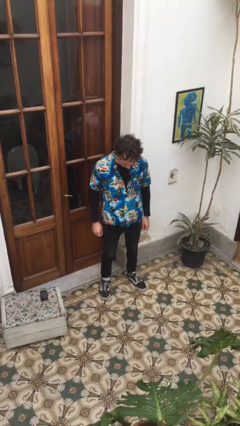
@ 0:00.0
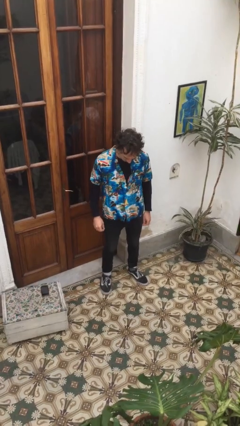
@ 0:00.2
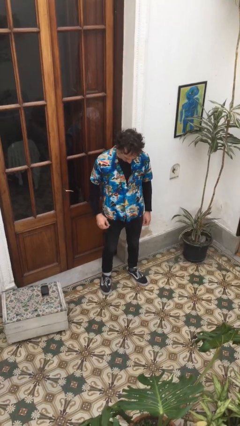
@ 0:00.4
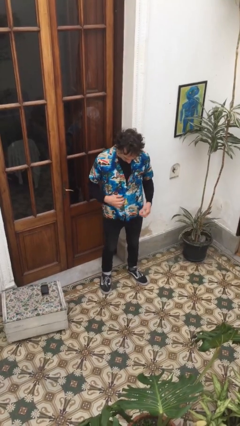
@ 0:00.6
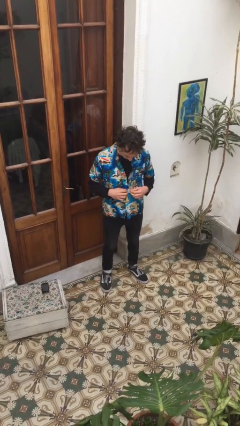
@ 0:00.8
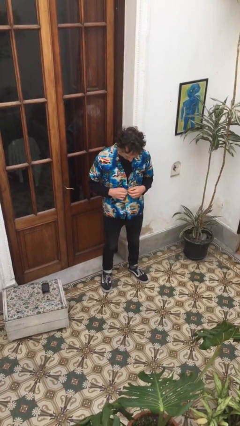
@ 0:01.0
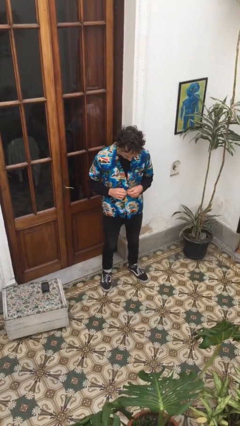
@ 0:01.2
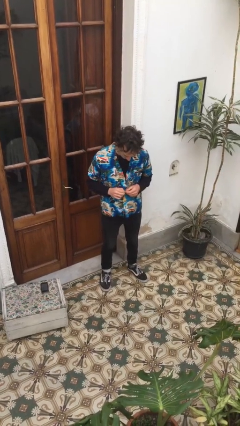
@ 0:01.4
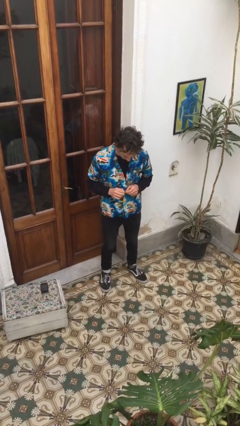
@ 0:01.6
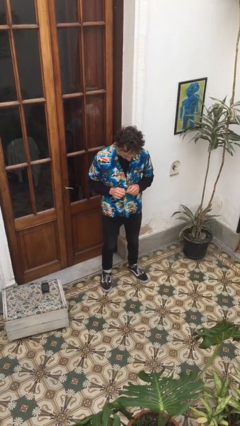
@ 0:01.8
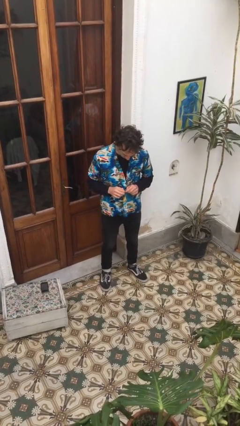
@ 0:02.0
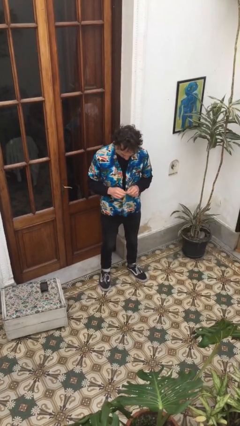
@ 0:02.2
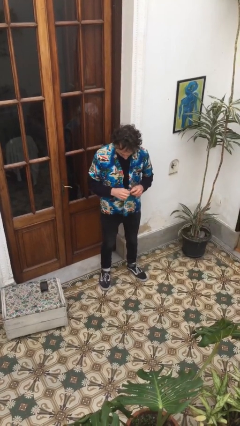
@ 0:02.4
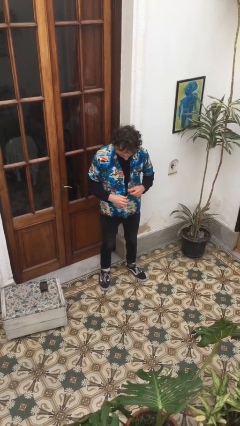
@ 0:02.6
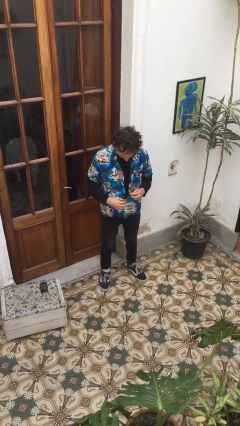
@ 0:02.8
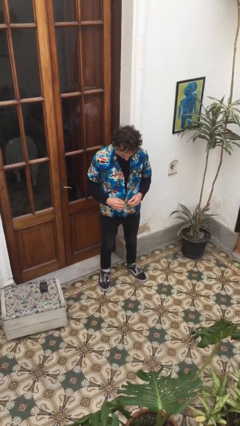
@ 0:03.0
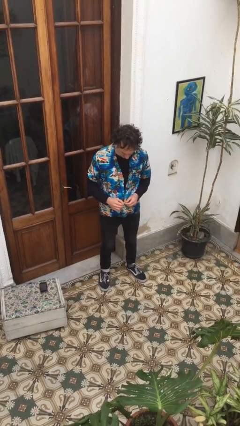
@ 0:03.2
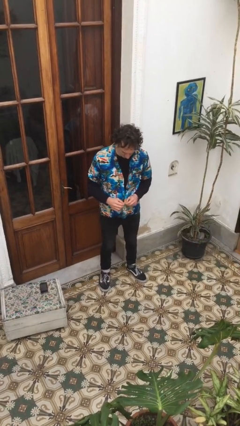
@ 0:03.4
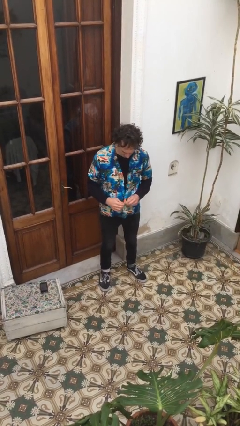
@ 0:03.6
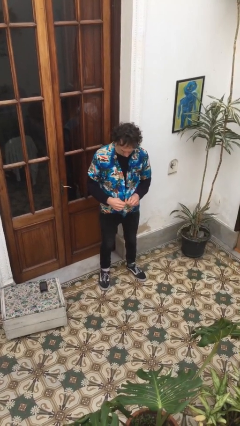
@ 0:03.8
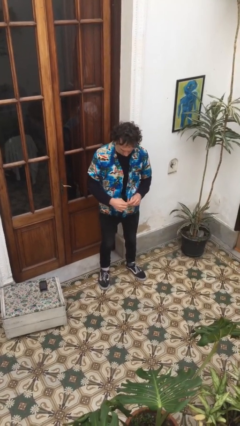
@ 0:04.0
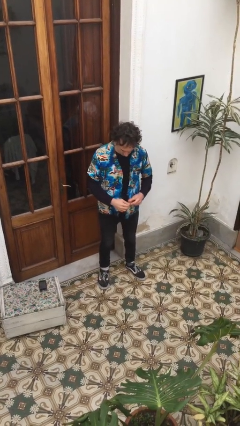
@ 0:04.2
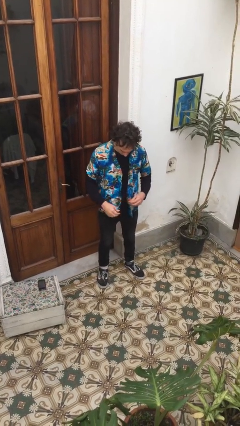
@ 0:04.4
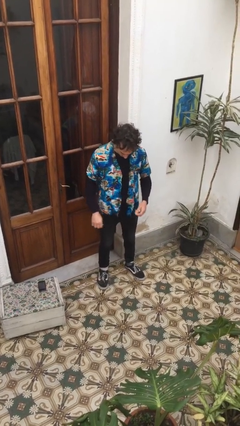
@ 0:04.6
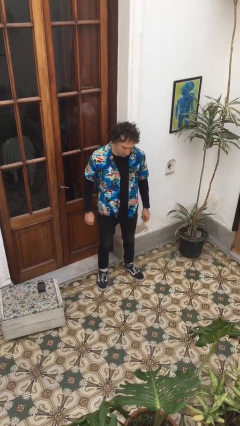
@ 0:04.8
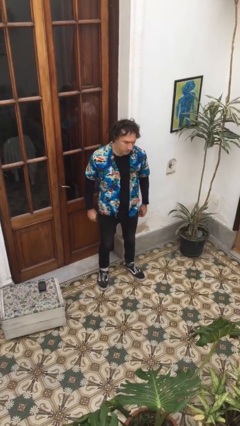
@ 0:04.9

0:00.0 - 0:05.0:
person unbuttons shirt

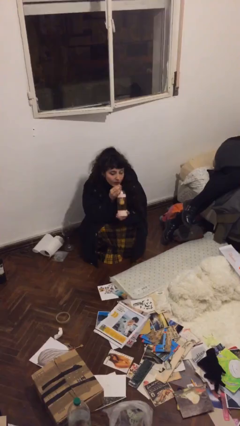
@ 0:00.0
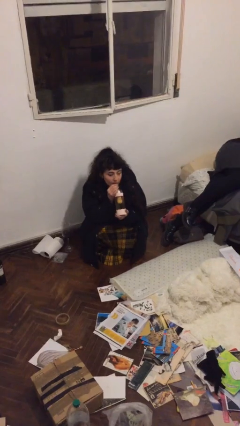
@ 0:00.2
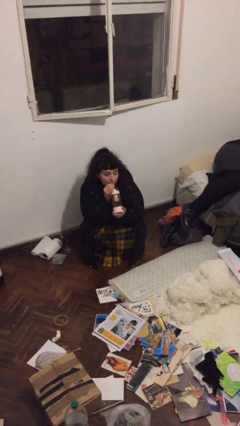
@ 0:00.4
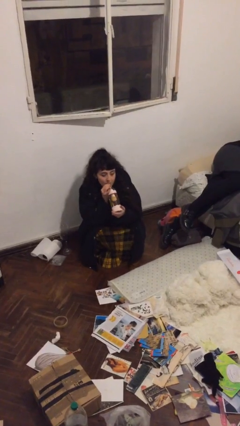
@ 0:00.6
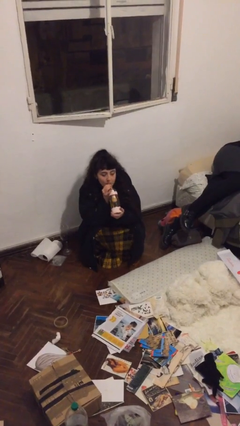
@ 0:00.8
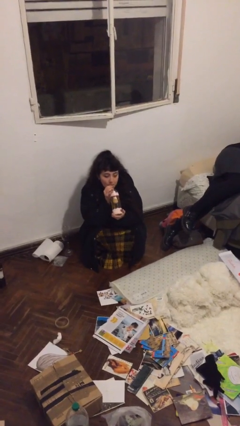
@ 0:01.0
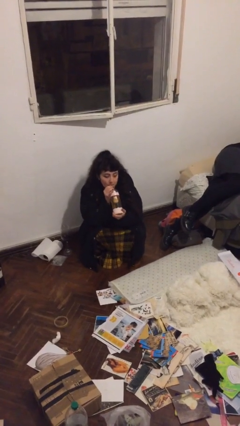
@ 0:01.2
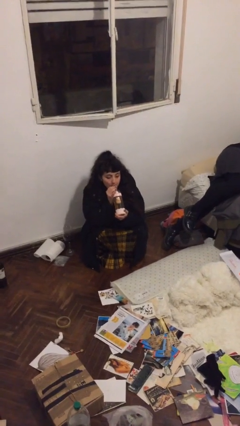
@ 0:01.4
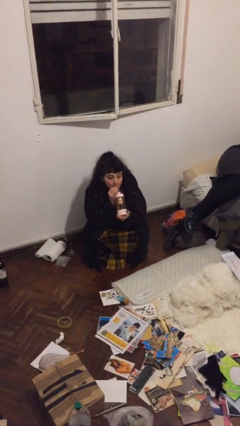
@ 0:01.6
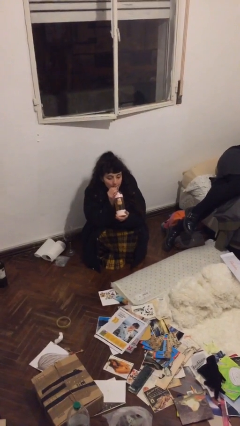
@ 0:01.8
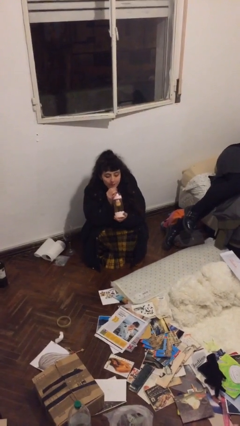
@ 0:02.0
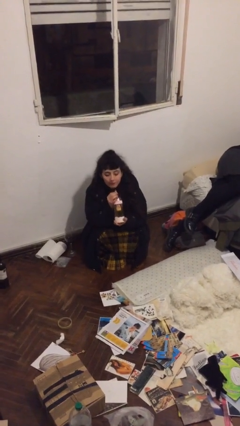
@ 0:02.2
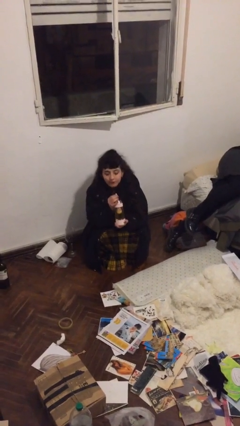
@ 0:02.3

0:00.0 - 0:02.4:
person drinks from straw

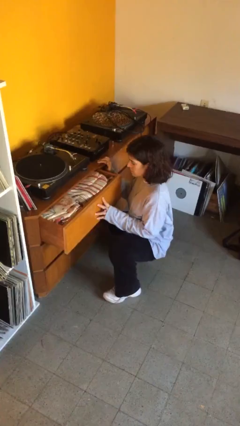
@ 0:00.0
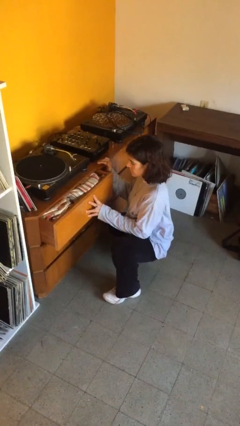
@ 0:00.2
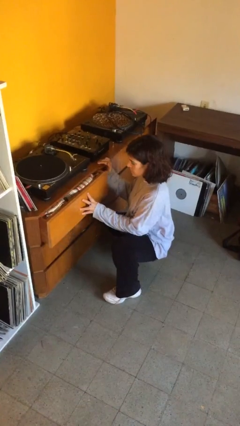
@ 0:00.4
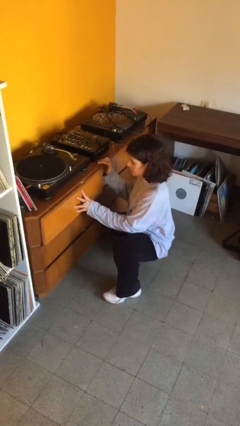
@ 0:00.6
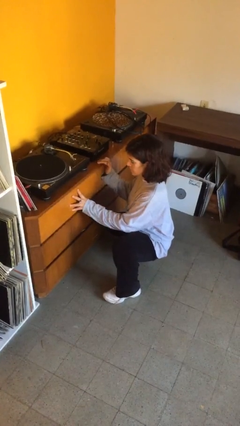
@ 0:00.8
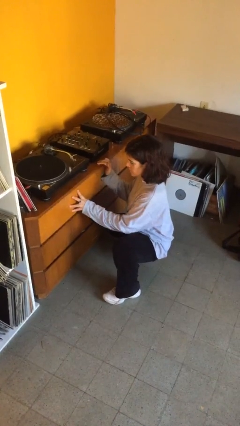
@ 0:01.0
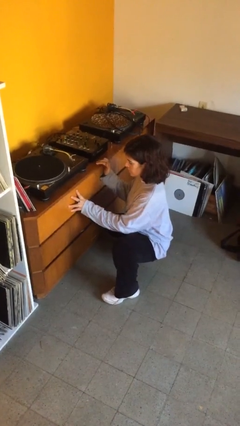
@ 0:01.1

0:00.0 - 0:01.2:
person closes dresser drawer

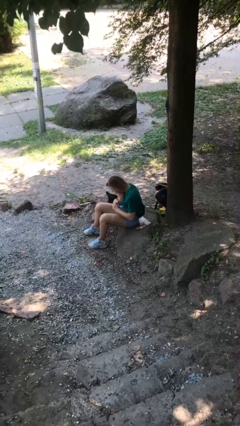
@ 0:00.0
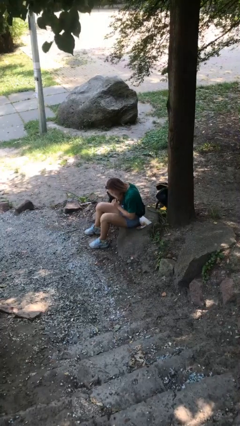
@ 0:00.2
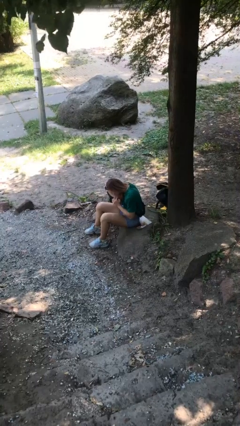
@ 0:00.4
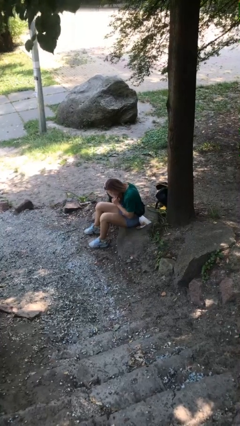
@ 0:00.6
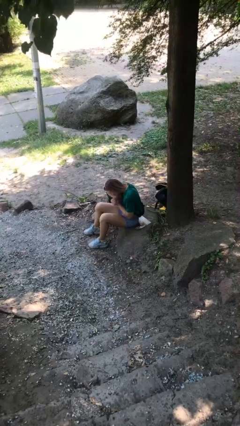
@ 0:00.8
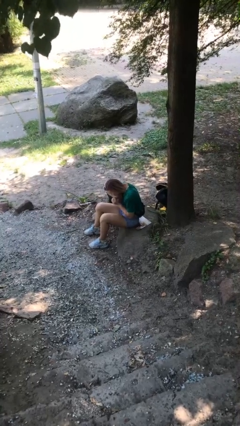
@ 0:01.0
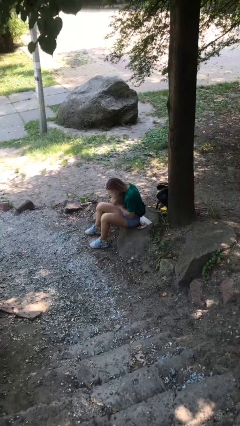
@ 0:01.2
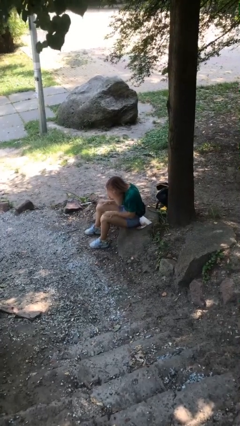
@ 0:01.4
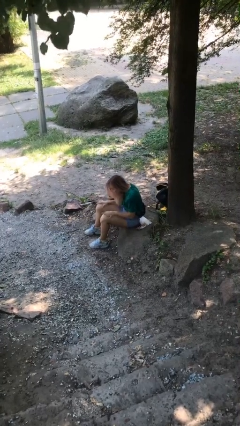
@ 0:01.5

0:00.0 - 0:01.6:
person looks at hands in lap

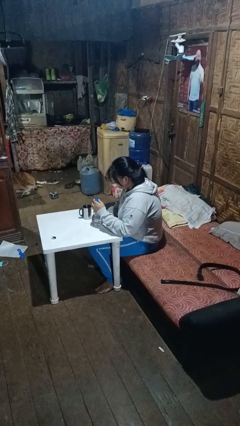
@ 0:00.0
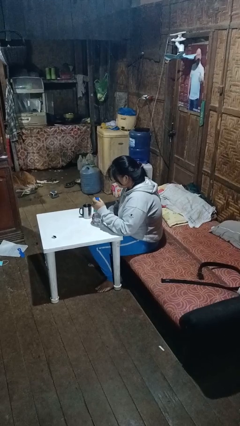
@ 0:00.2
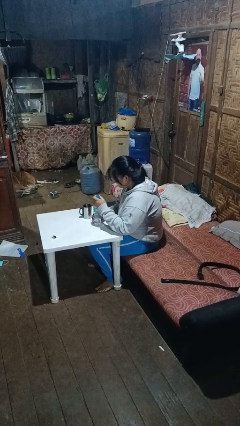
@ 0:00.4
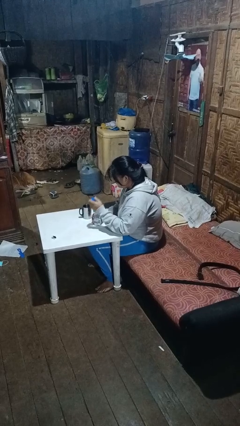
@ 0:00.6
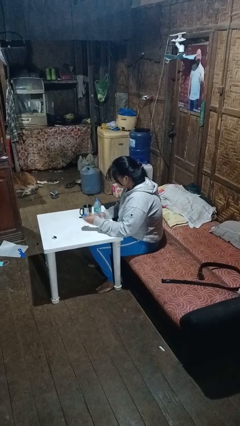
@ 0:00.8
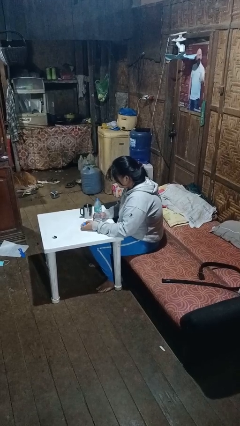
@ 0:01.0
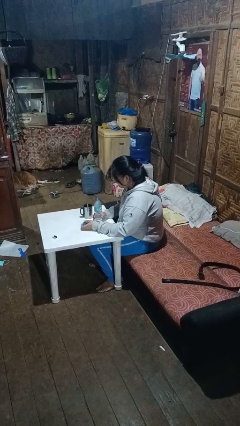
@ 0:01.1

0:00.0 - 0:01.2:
person unscrews lid from bottle

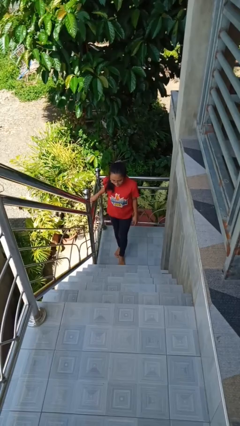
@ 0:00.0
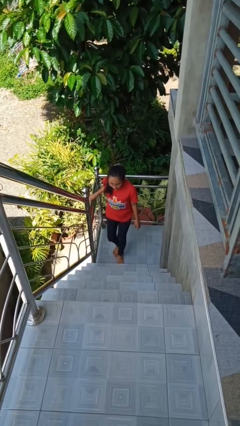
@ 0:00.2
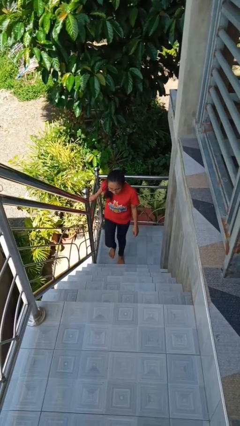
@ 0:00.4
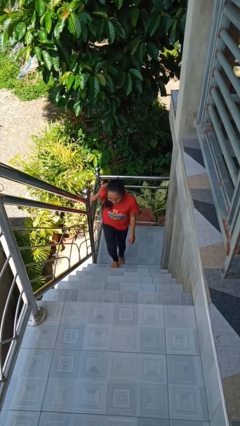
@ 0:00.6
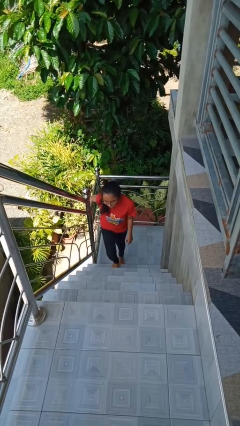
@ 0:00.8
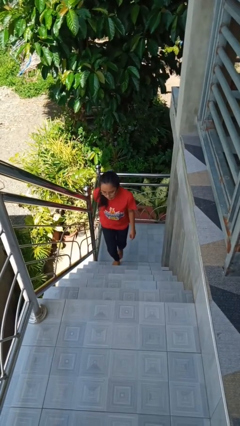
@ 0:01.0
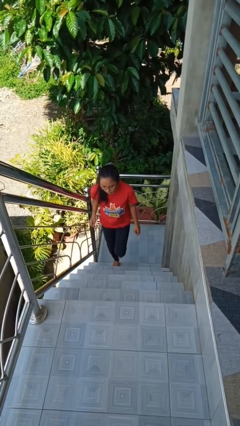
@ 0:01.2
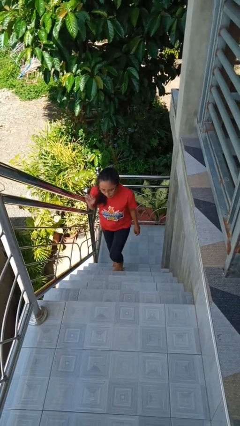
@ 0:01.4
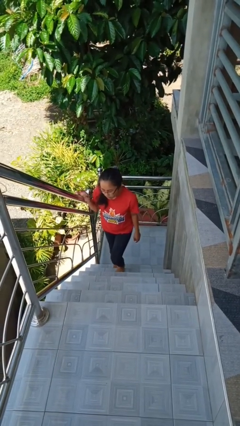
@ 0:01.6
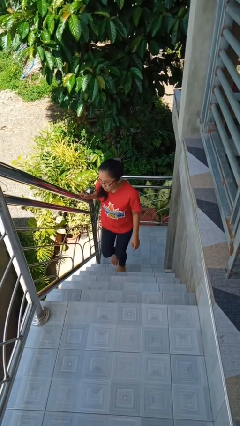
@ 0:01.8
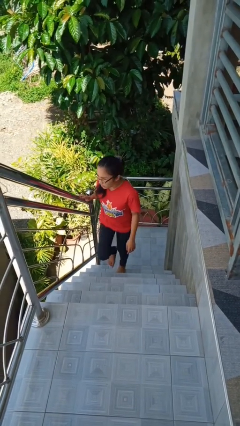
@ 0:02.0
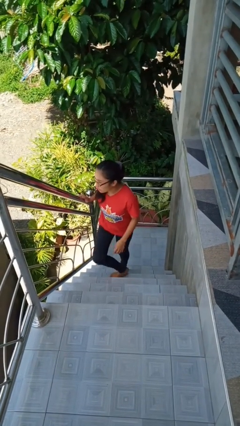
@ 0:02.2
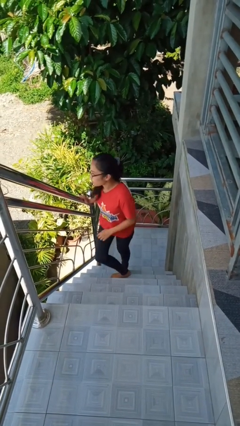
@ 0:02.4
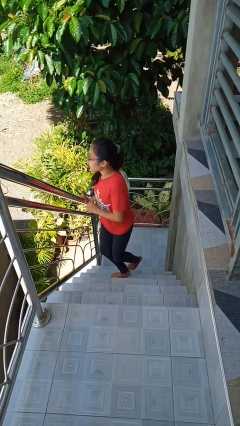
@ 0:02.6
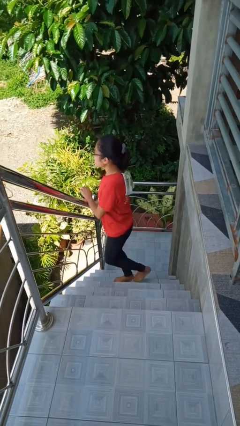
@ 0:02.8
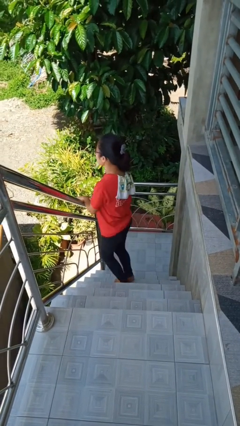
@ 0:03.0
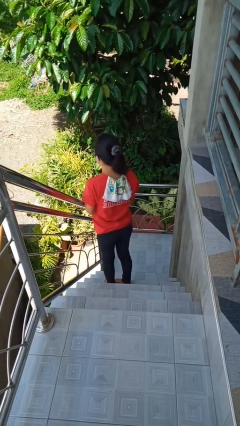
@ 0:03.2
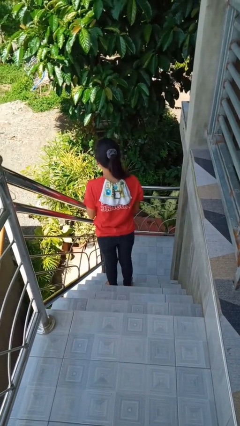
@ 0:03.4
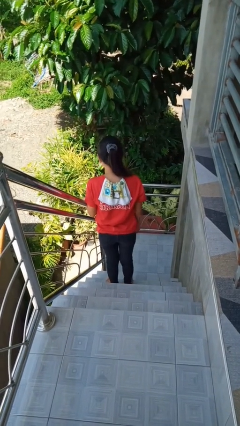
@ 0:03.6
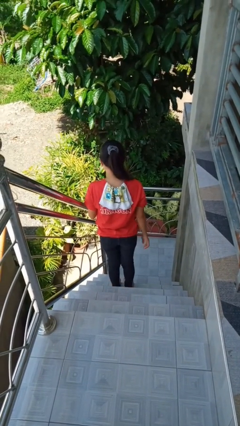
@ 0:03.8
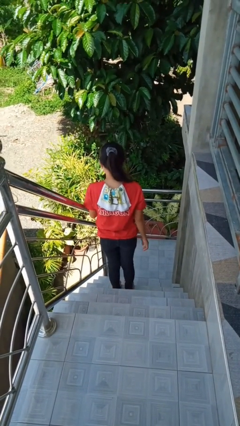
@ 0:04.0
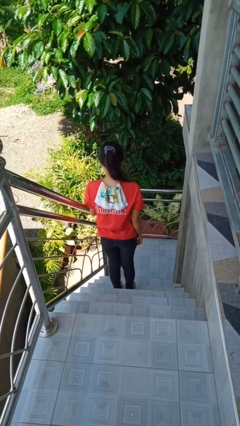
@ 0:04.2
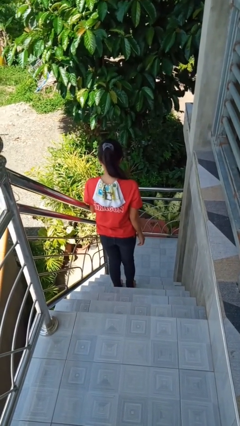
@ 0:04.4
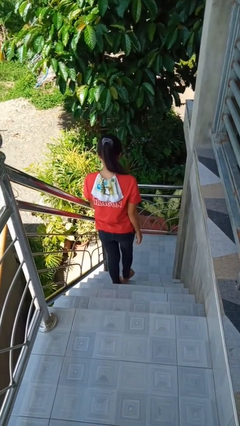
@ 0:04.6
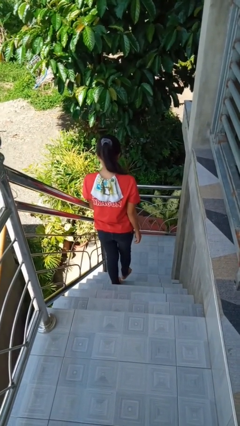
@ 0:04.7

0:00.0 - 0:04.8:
person climbs up stairs

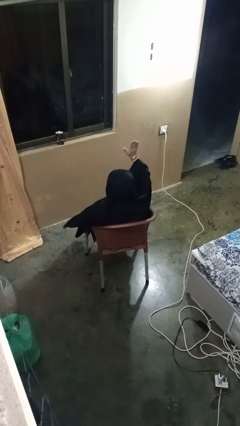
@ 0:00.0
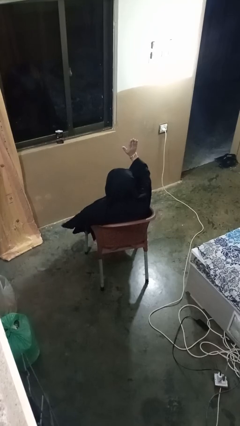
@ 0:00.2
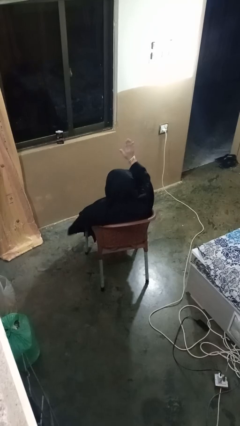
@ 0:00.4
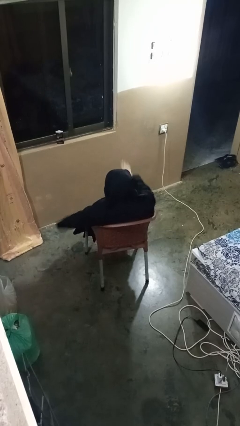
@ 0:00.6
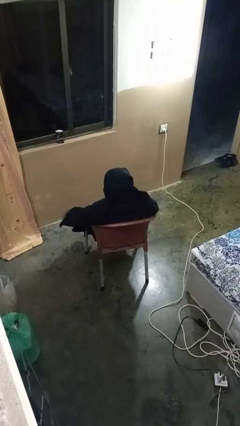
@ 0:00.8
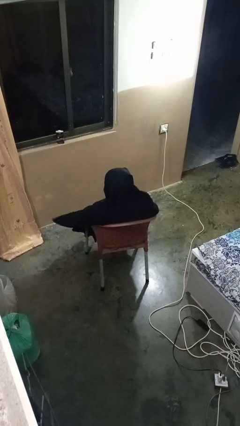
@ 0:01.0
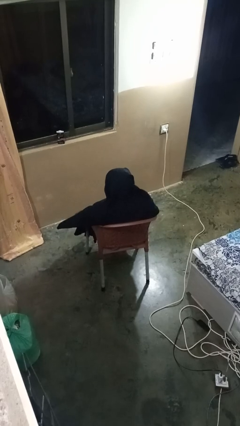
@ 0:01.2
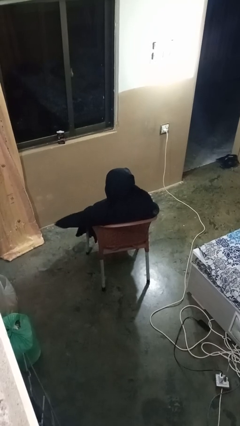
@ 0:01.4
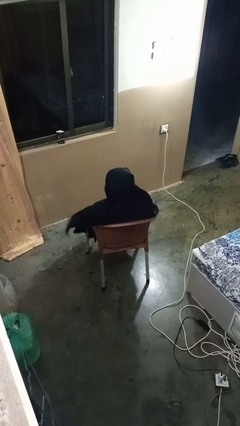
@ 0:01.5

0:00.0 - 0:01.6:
person gestures lower hand
